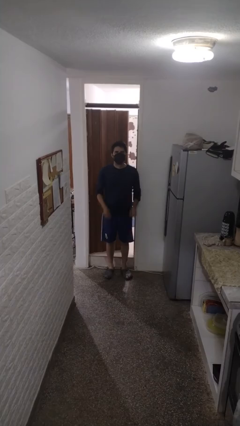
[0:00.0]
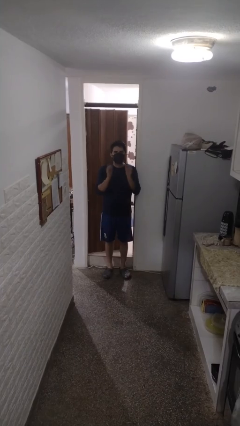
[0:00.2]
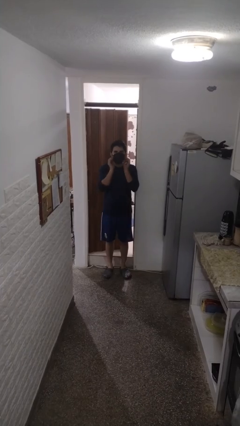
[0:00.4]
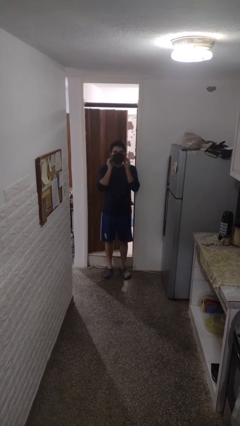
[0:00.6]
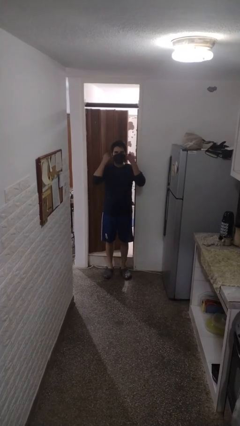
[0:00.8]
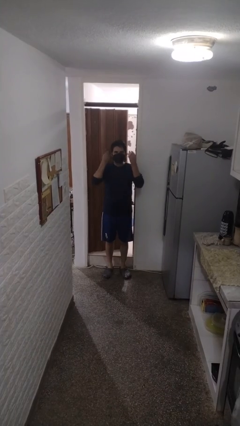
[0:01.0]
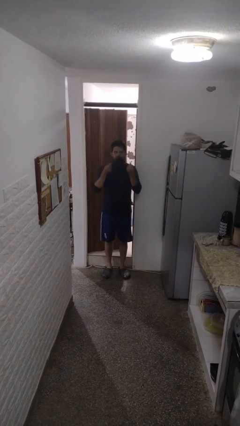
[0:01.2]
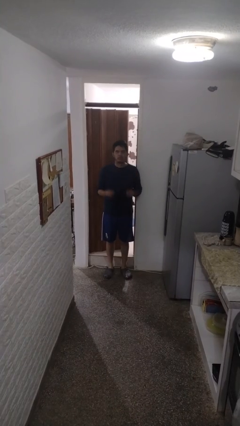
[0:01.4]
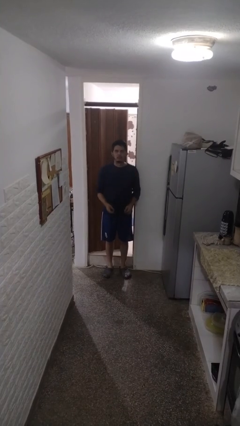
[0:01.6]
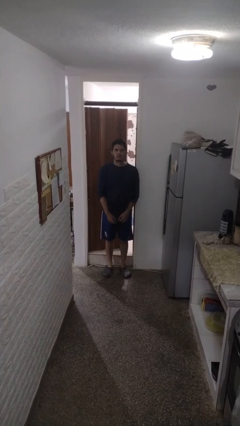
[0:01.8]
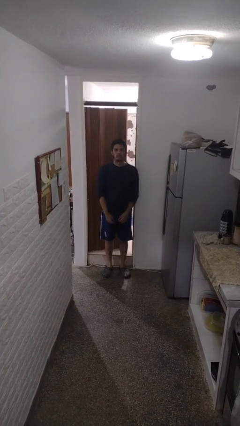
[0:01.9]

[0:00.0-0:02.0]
person takes off facemask

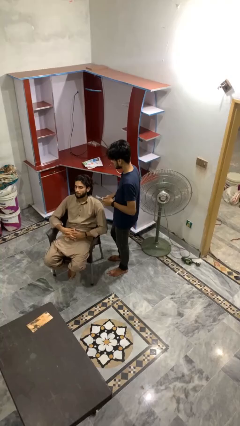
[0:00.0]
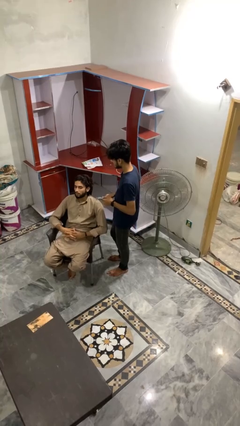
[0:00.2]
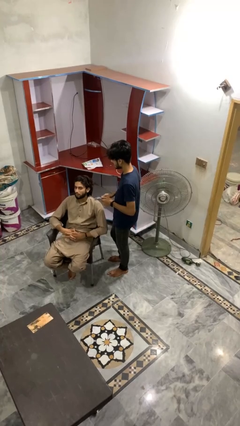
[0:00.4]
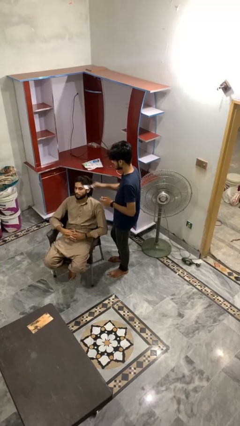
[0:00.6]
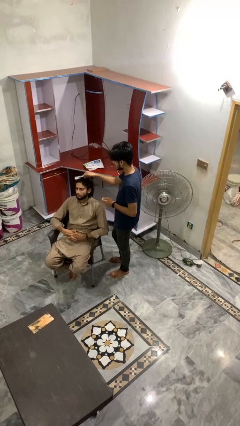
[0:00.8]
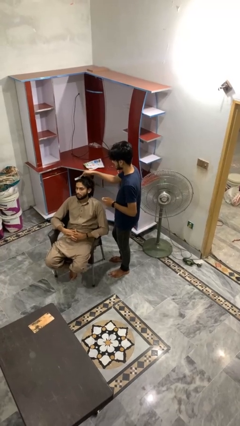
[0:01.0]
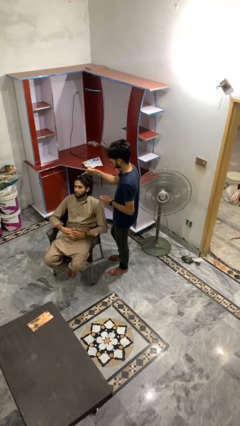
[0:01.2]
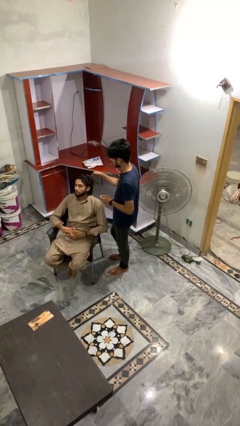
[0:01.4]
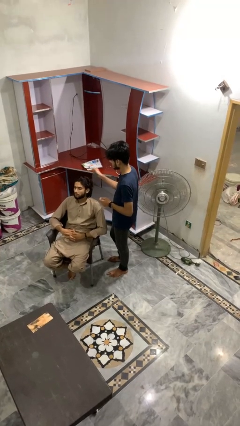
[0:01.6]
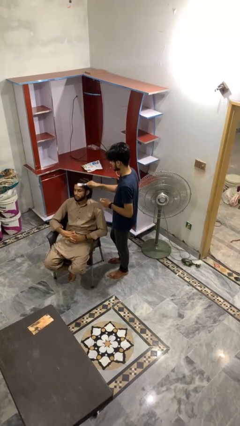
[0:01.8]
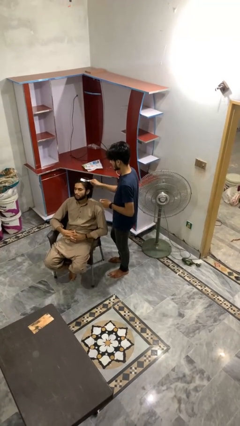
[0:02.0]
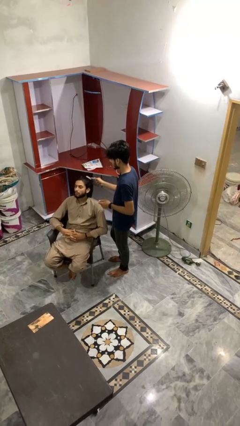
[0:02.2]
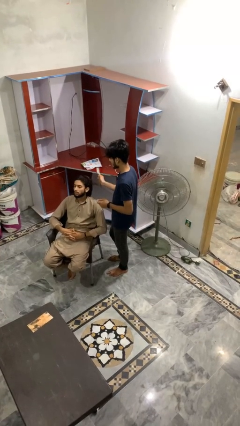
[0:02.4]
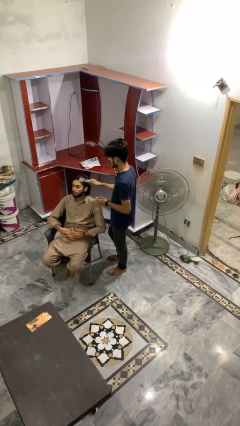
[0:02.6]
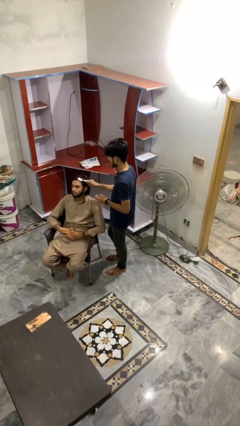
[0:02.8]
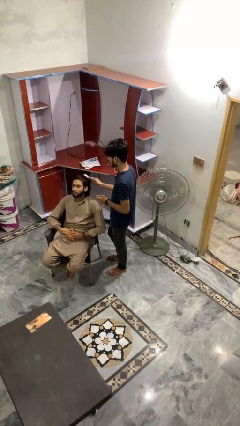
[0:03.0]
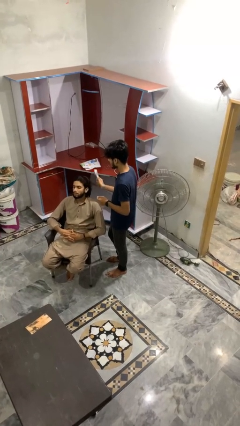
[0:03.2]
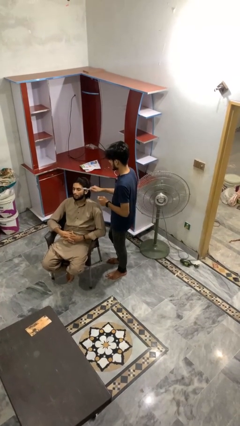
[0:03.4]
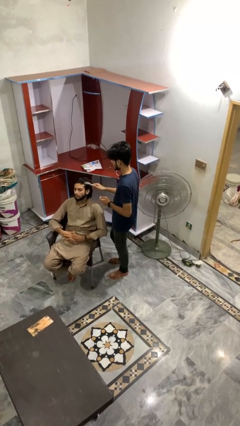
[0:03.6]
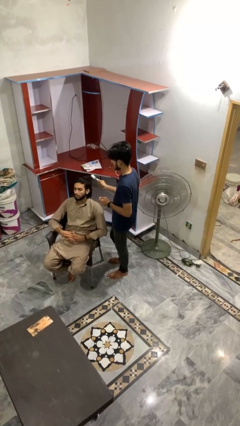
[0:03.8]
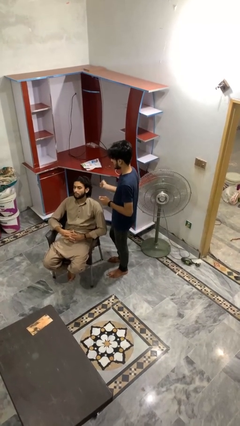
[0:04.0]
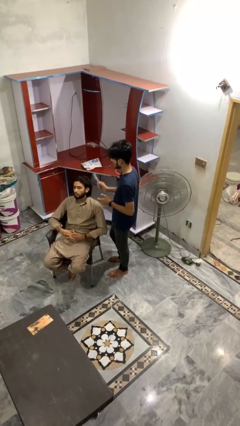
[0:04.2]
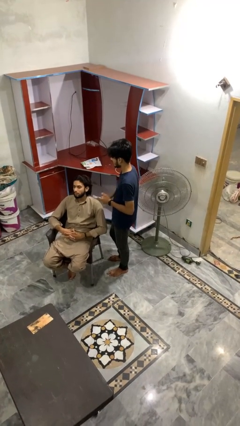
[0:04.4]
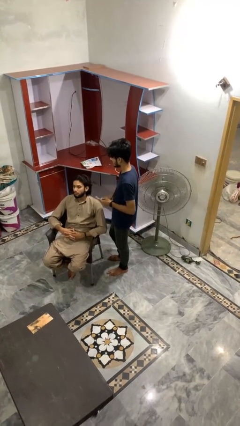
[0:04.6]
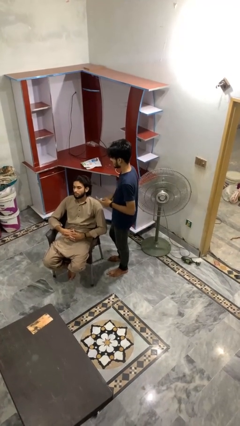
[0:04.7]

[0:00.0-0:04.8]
person brushes hair of person

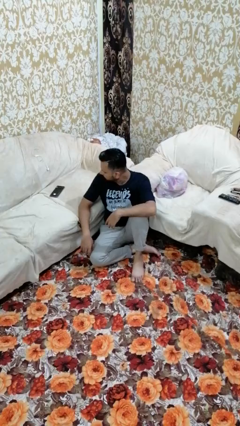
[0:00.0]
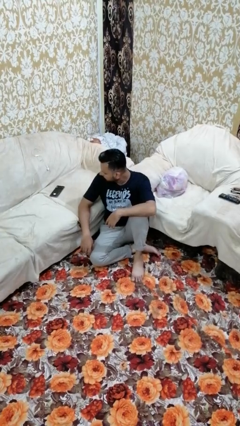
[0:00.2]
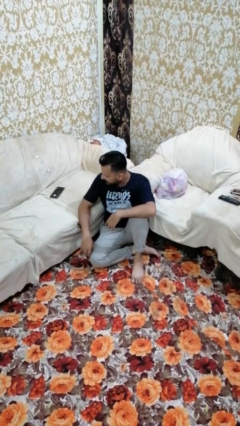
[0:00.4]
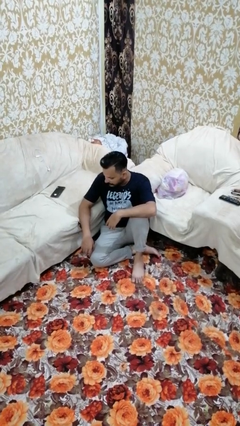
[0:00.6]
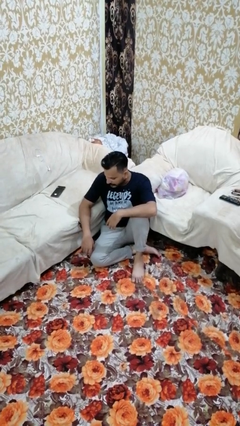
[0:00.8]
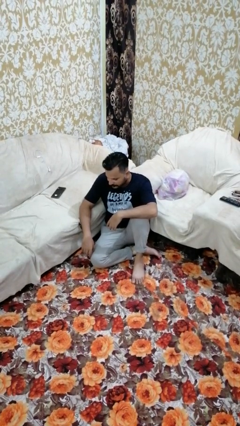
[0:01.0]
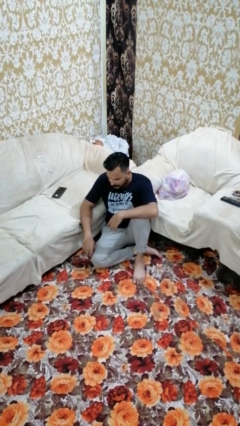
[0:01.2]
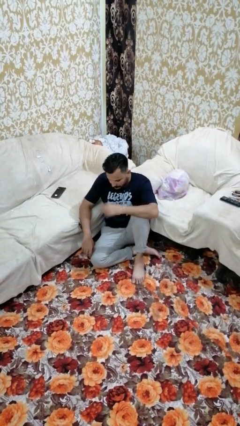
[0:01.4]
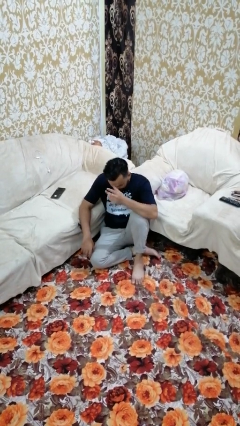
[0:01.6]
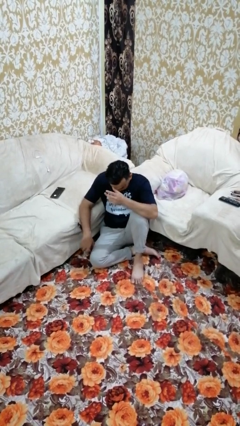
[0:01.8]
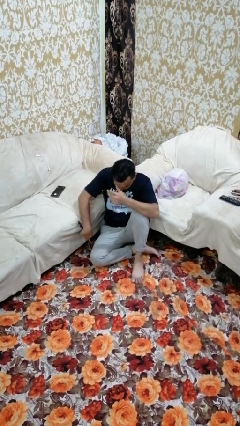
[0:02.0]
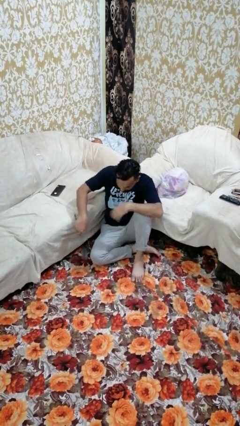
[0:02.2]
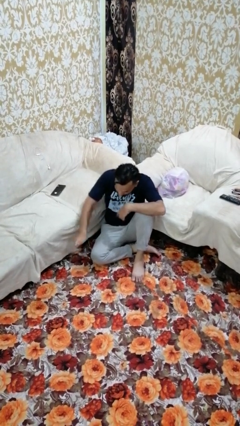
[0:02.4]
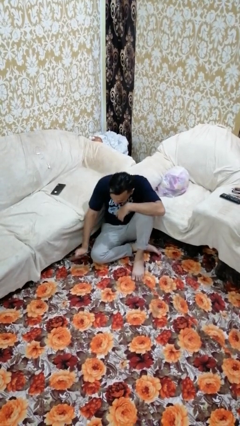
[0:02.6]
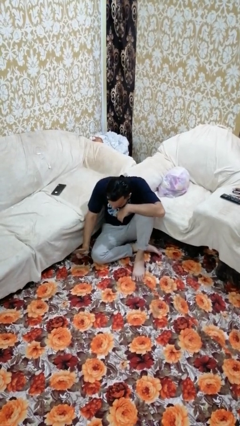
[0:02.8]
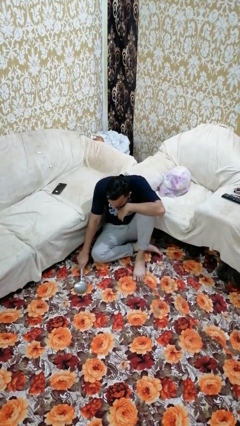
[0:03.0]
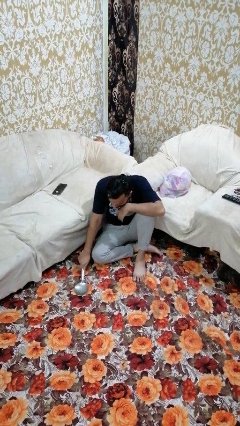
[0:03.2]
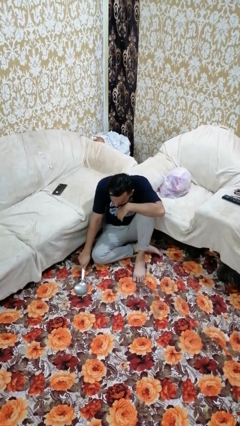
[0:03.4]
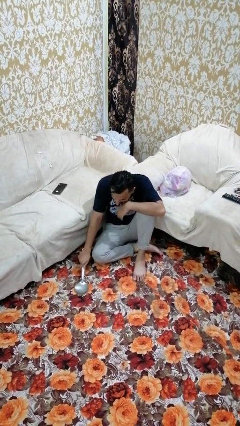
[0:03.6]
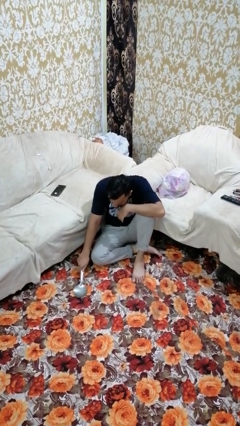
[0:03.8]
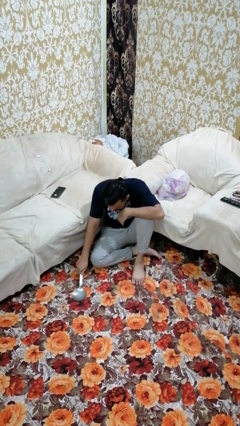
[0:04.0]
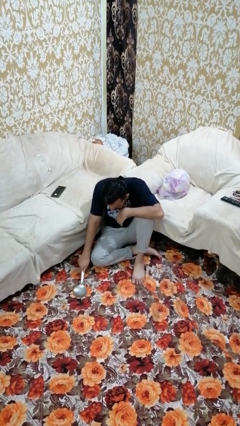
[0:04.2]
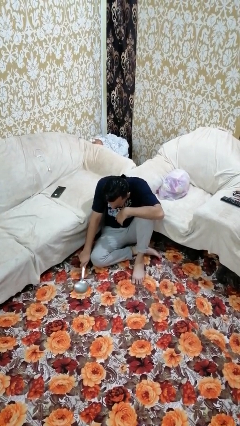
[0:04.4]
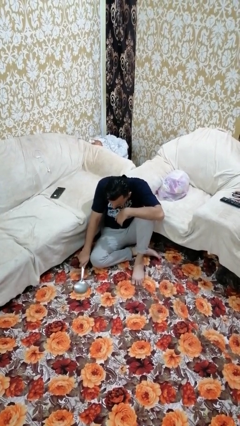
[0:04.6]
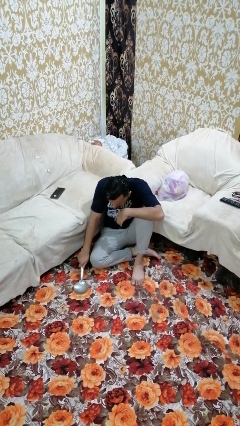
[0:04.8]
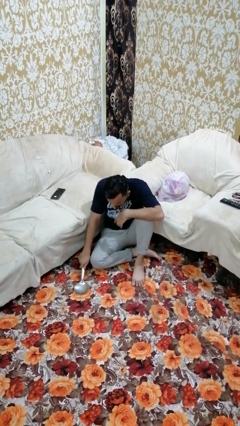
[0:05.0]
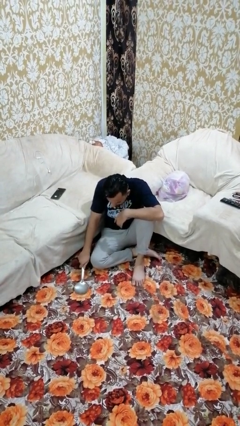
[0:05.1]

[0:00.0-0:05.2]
person swats bug

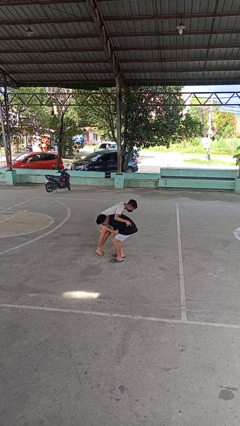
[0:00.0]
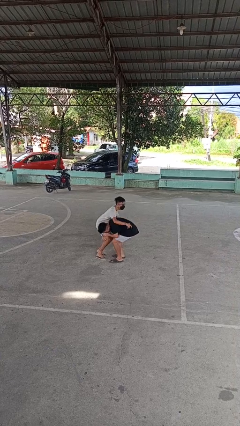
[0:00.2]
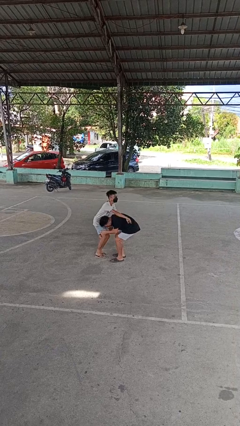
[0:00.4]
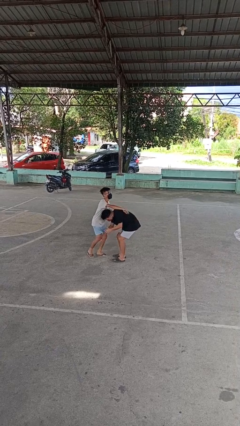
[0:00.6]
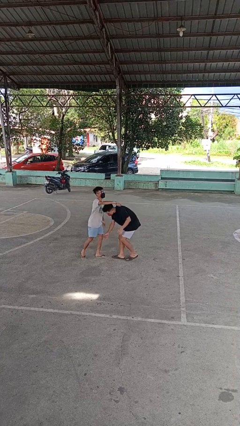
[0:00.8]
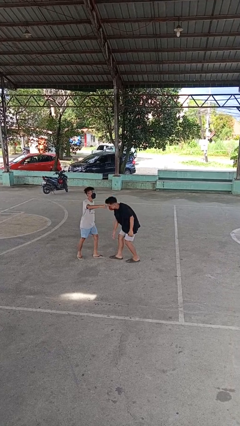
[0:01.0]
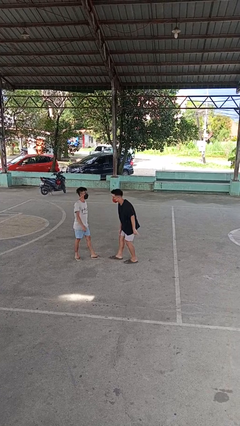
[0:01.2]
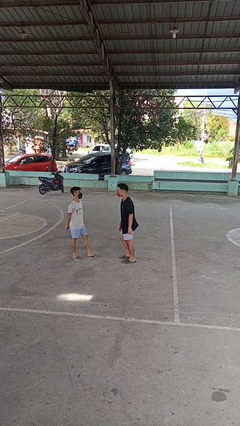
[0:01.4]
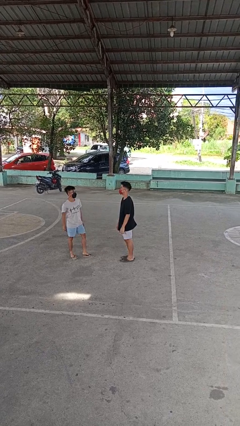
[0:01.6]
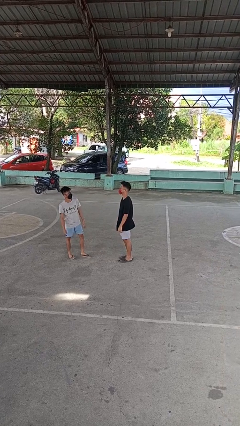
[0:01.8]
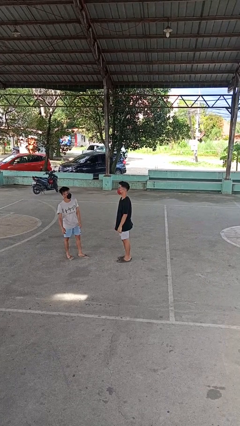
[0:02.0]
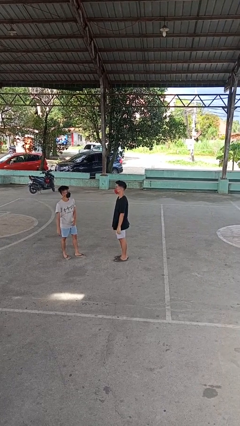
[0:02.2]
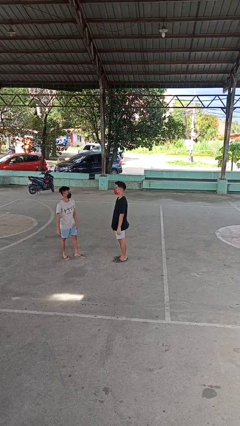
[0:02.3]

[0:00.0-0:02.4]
person puts down person

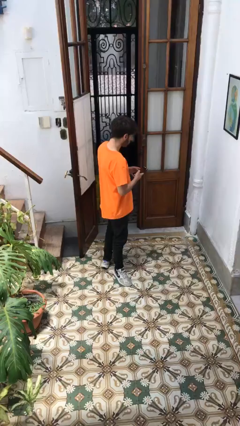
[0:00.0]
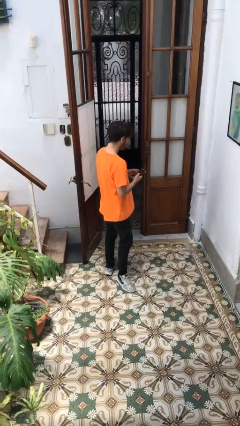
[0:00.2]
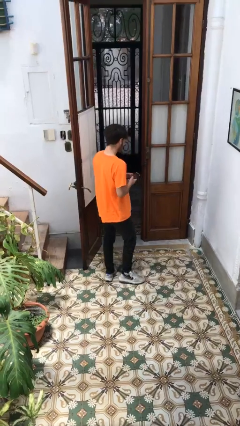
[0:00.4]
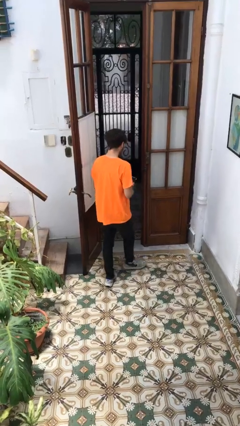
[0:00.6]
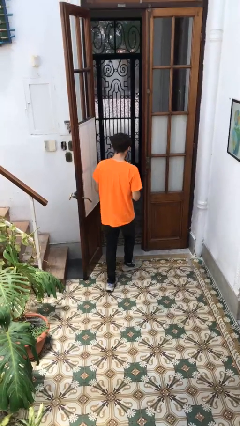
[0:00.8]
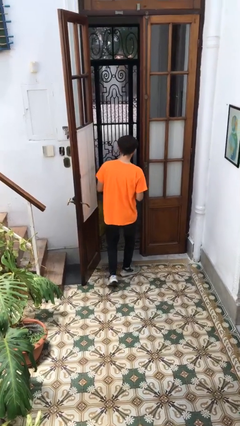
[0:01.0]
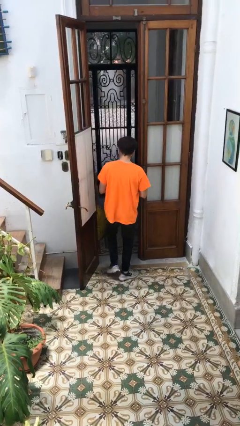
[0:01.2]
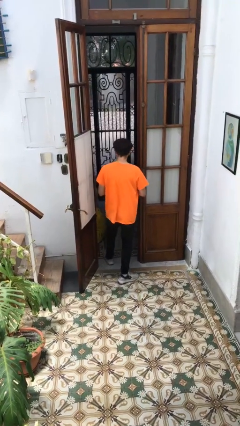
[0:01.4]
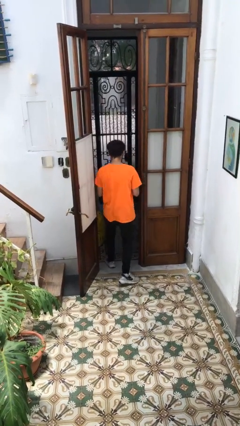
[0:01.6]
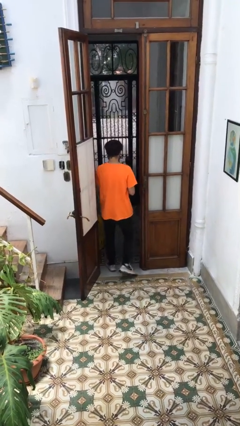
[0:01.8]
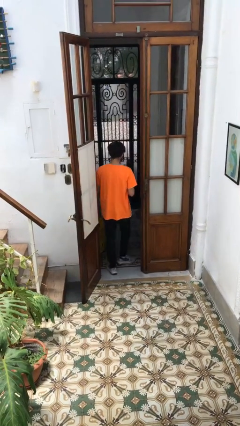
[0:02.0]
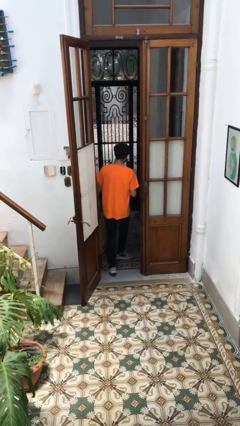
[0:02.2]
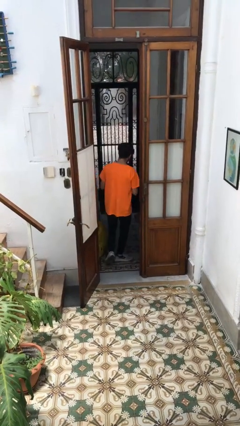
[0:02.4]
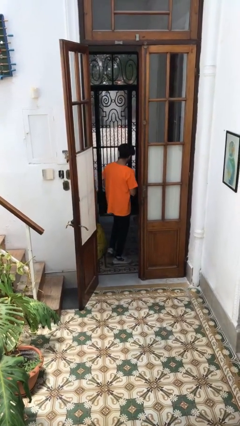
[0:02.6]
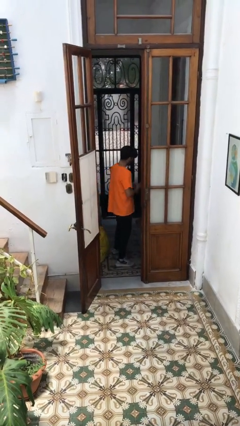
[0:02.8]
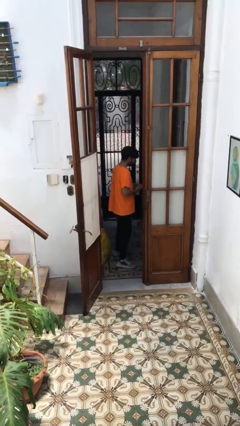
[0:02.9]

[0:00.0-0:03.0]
person exits scene through structure
